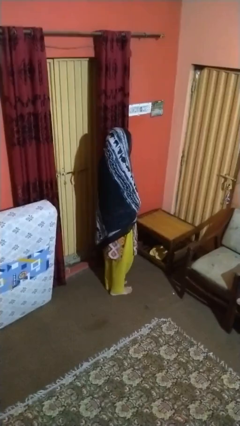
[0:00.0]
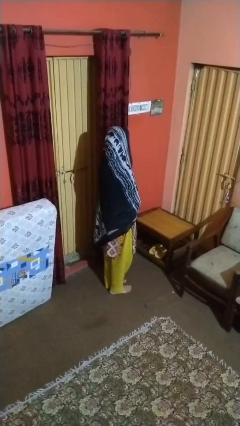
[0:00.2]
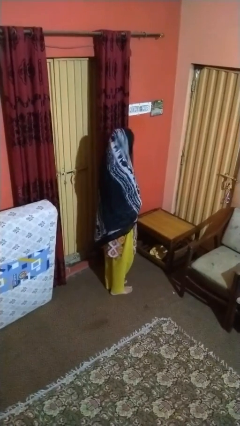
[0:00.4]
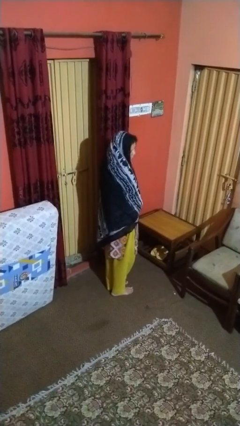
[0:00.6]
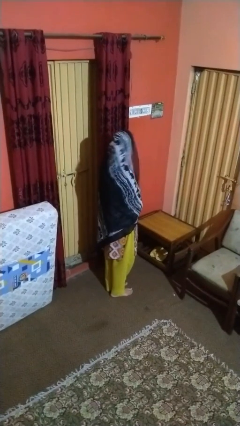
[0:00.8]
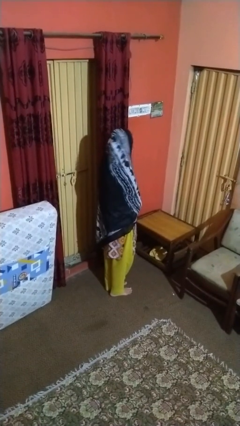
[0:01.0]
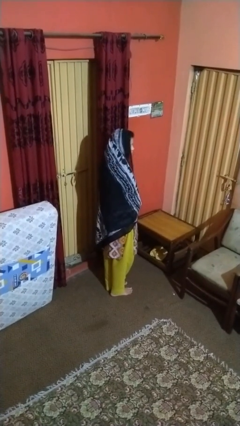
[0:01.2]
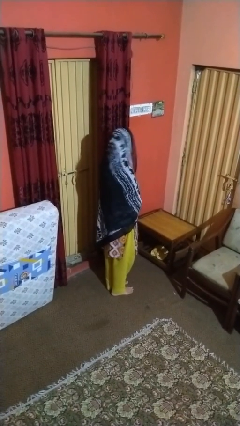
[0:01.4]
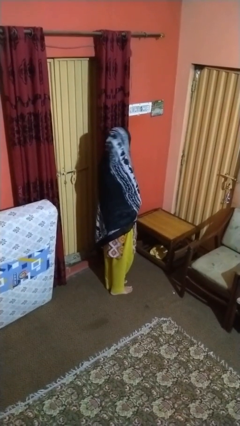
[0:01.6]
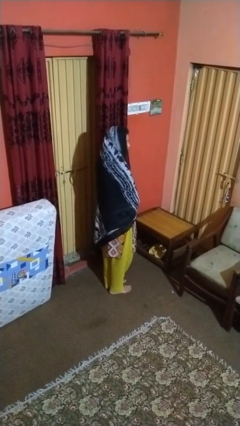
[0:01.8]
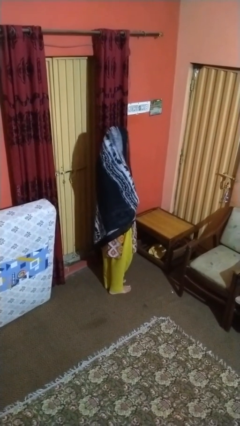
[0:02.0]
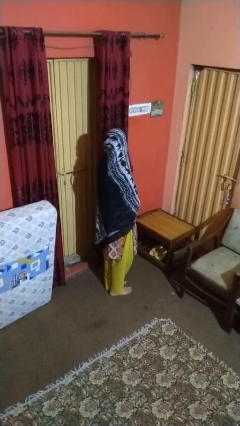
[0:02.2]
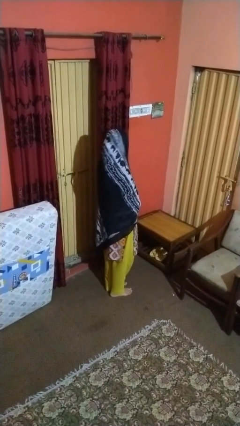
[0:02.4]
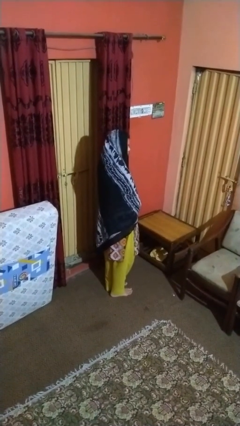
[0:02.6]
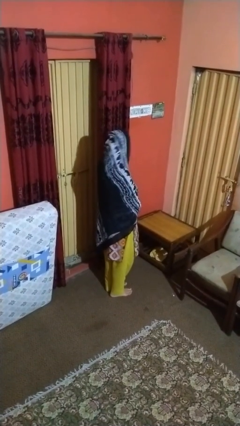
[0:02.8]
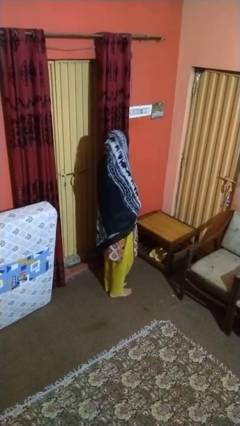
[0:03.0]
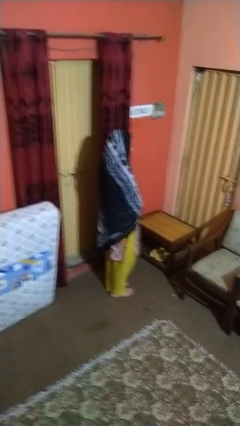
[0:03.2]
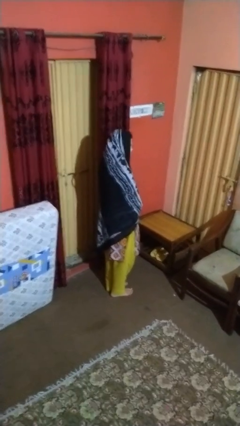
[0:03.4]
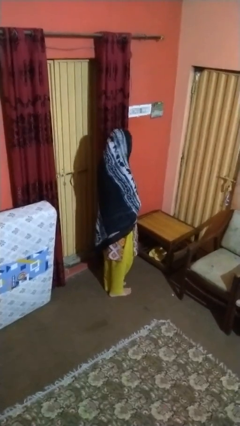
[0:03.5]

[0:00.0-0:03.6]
person shakes head

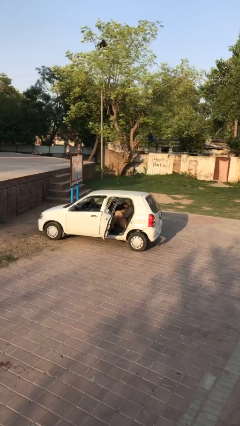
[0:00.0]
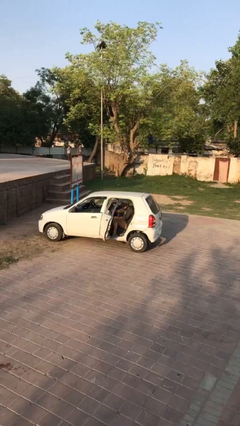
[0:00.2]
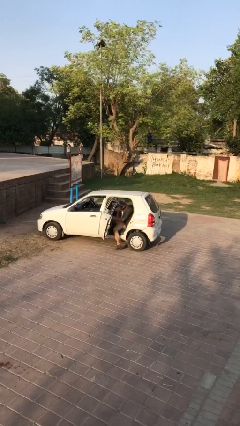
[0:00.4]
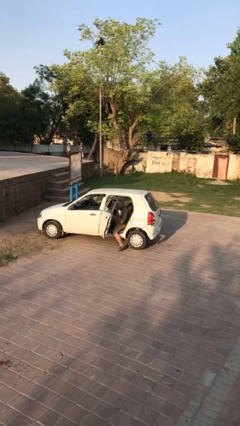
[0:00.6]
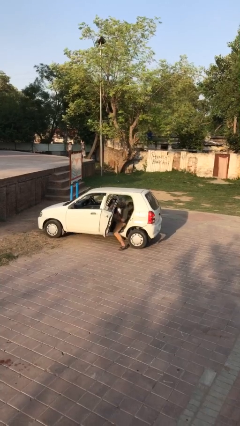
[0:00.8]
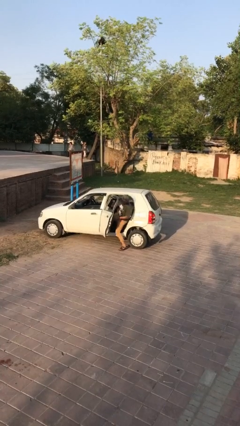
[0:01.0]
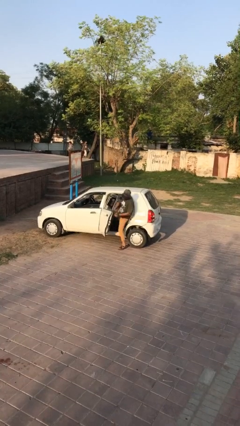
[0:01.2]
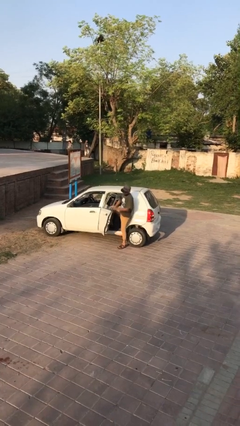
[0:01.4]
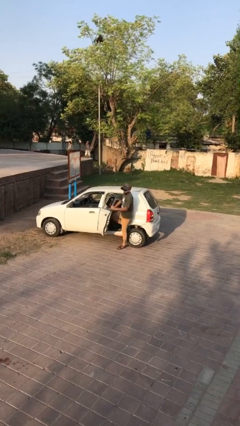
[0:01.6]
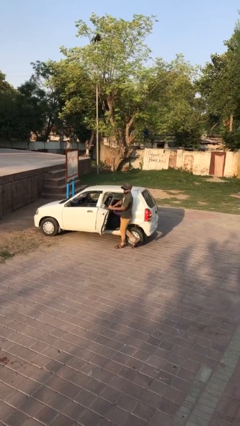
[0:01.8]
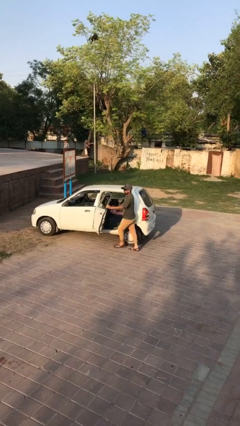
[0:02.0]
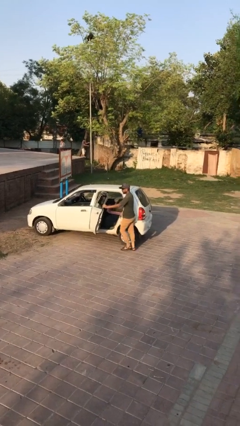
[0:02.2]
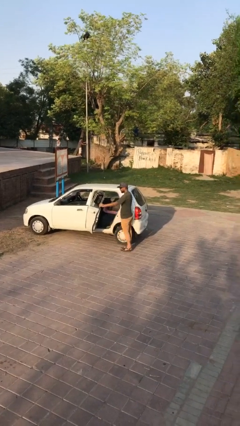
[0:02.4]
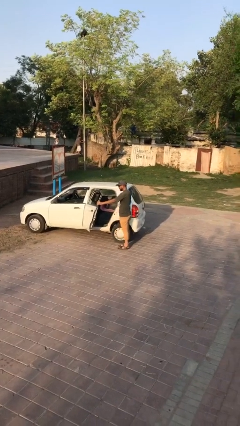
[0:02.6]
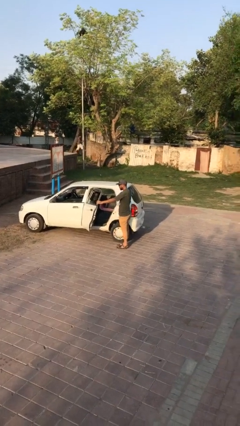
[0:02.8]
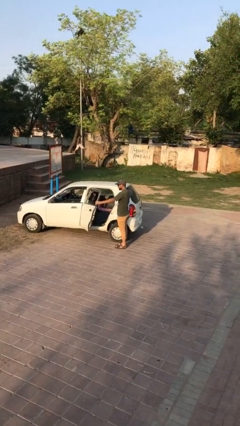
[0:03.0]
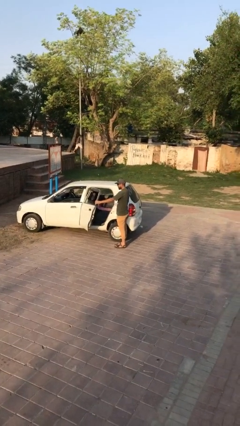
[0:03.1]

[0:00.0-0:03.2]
person exits car

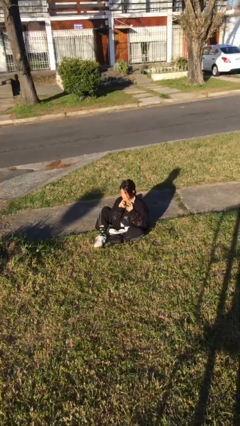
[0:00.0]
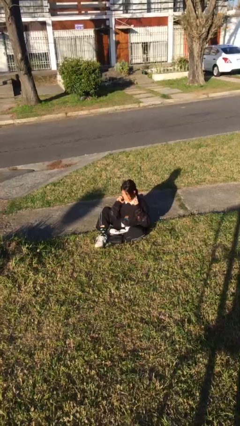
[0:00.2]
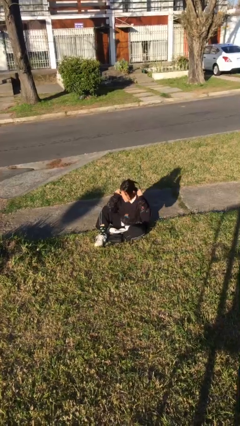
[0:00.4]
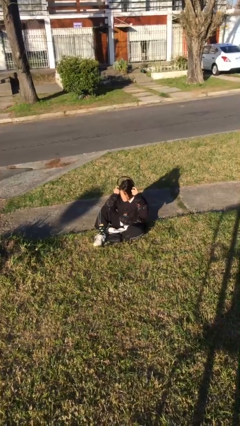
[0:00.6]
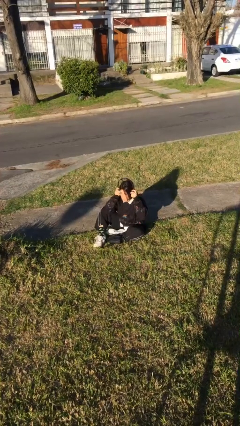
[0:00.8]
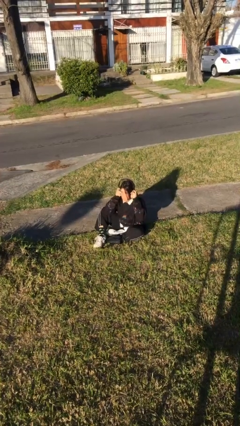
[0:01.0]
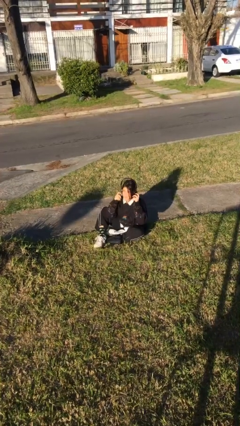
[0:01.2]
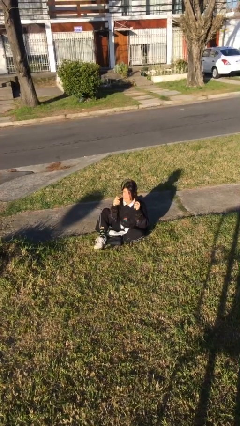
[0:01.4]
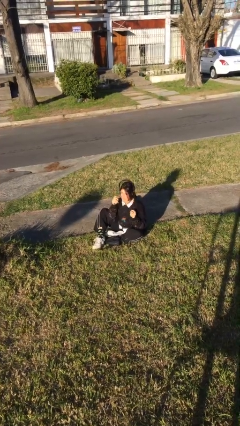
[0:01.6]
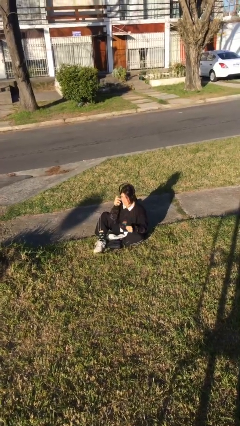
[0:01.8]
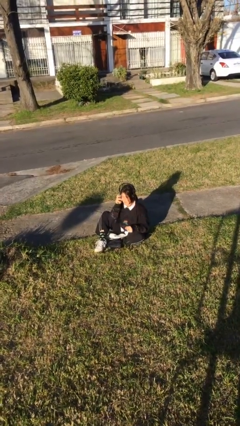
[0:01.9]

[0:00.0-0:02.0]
person puts on headphones

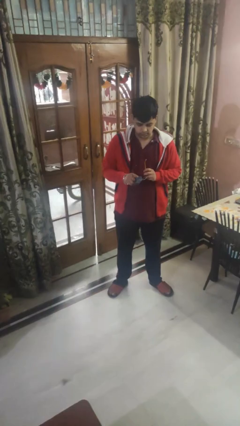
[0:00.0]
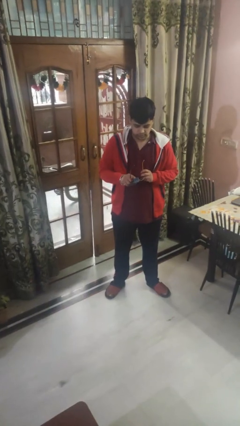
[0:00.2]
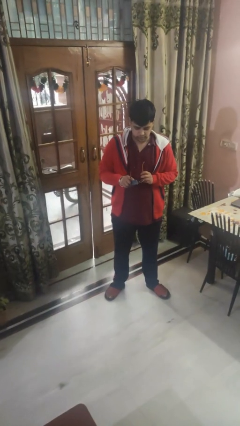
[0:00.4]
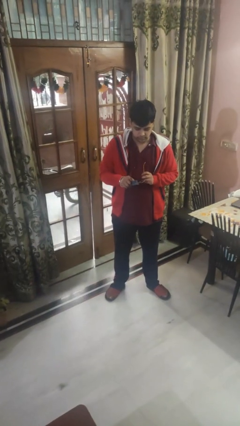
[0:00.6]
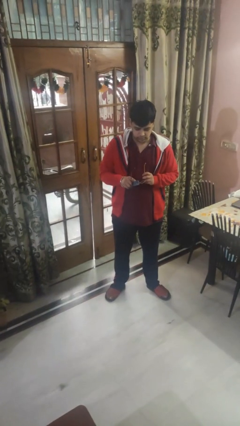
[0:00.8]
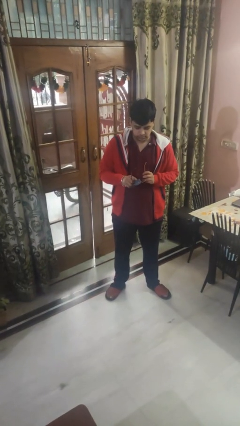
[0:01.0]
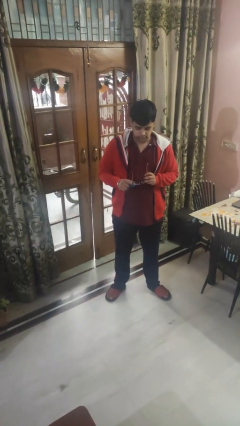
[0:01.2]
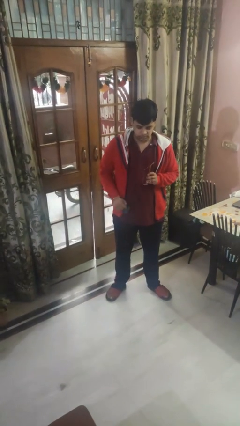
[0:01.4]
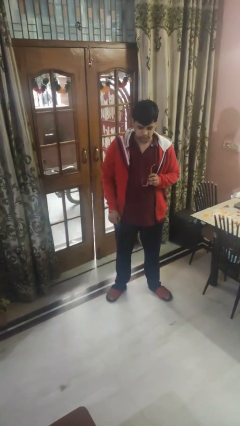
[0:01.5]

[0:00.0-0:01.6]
person cleans eyeglasses

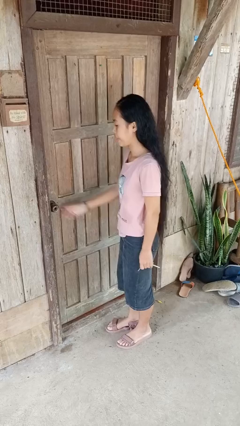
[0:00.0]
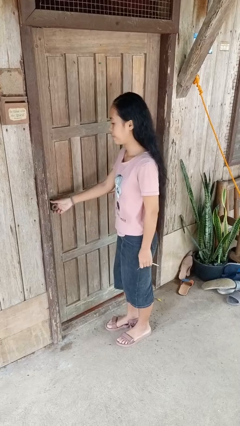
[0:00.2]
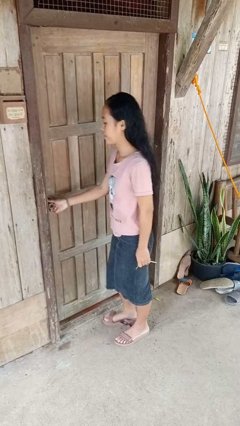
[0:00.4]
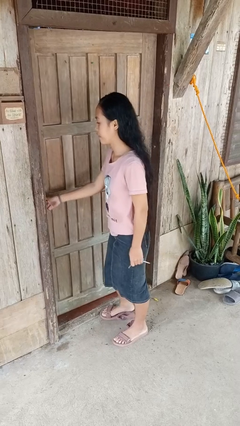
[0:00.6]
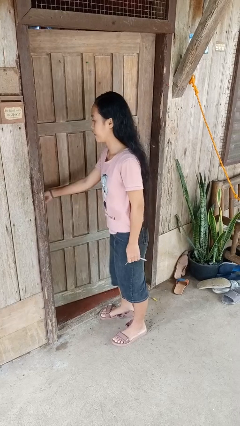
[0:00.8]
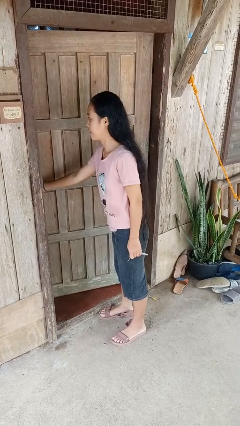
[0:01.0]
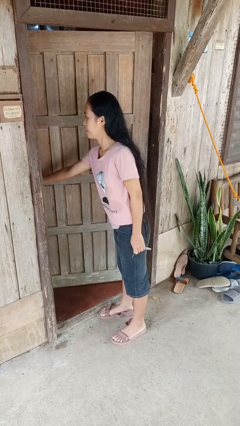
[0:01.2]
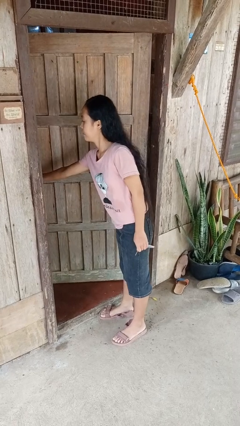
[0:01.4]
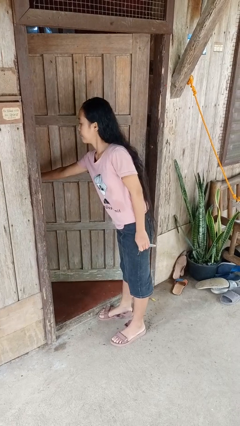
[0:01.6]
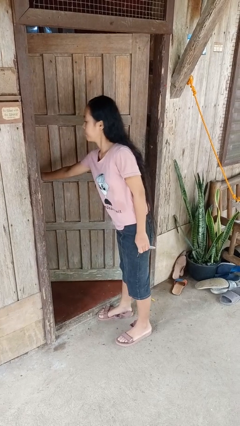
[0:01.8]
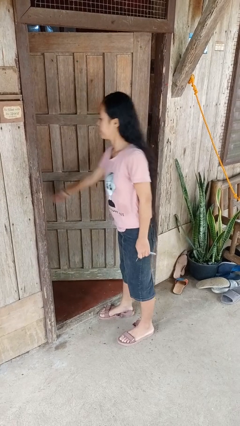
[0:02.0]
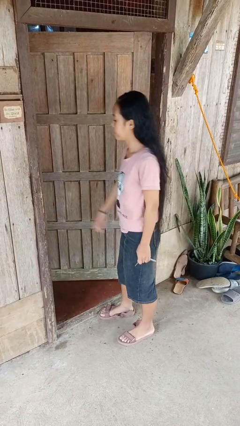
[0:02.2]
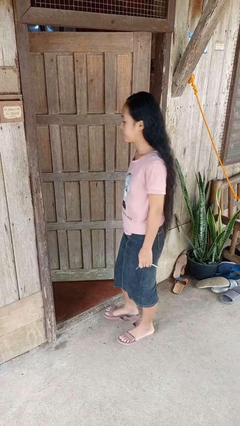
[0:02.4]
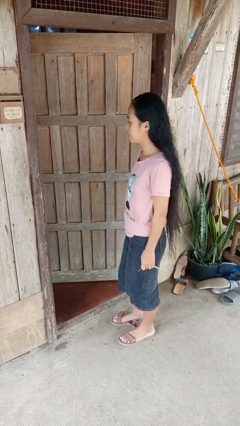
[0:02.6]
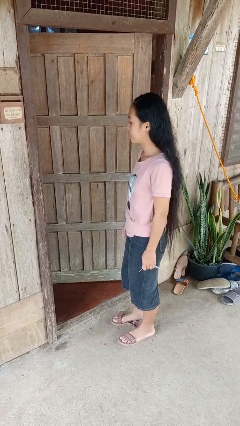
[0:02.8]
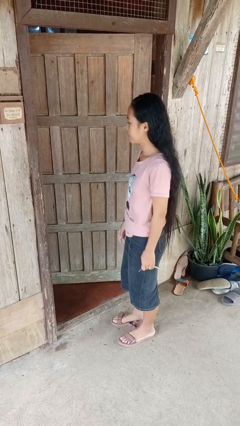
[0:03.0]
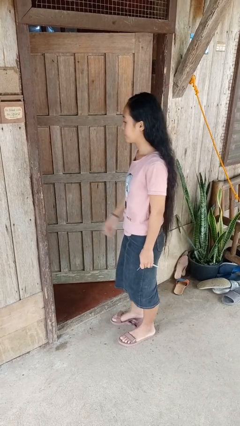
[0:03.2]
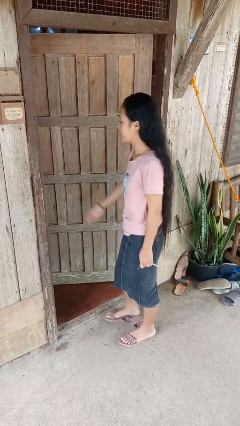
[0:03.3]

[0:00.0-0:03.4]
person opens facility door

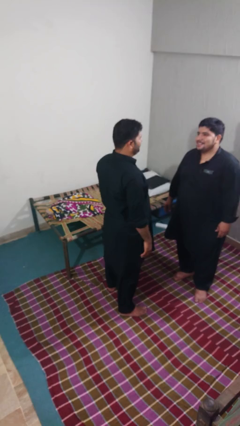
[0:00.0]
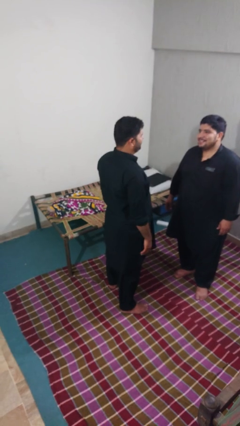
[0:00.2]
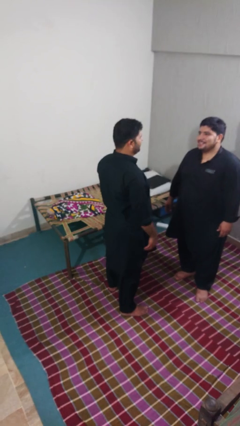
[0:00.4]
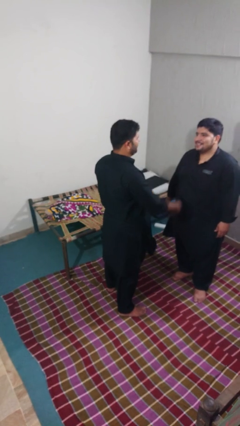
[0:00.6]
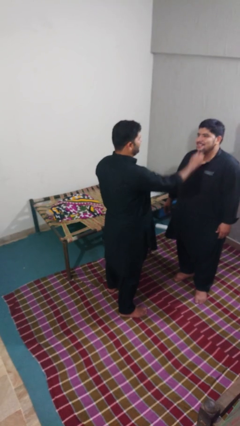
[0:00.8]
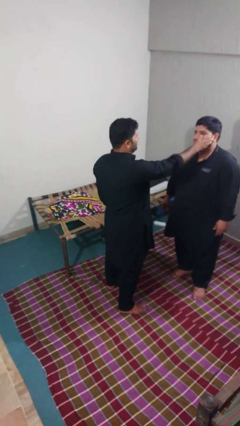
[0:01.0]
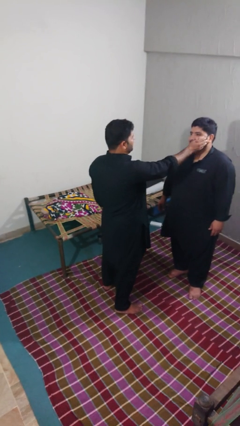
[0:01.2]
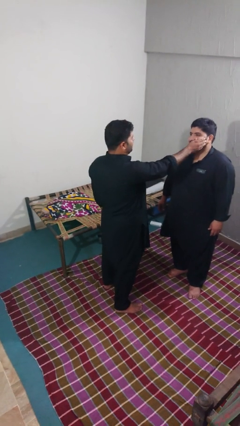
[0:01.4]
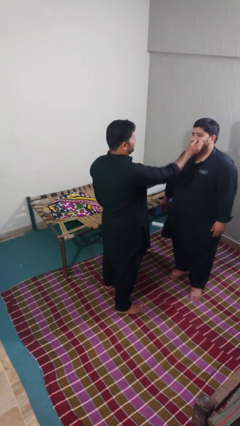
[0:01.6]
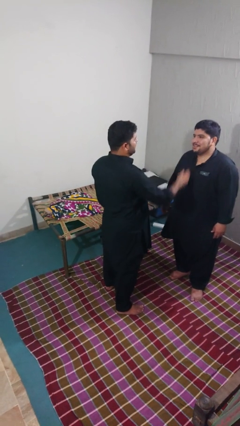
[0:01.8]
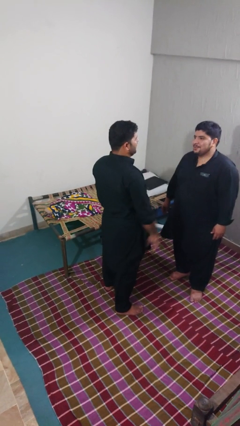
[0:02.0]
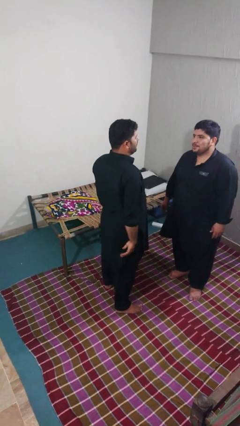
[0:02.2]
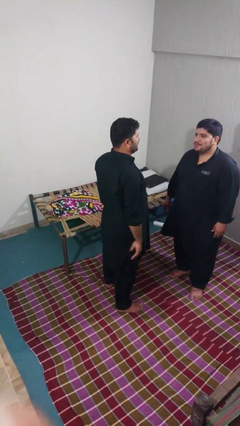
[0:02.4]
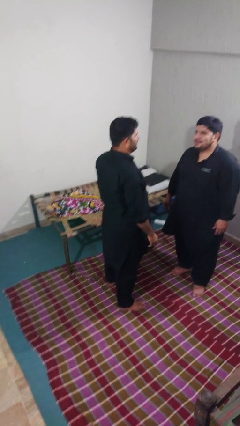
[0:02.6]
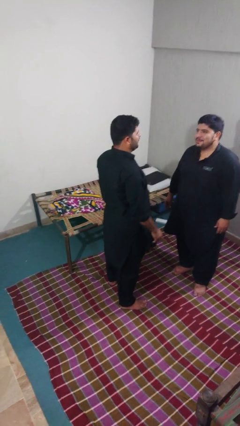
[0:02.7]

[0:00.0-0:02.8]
person touches face of person

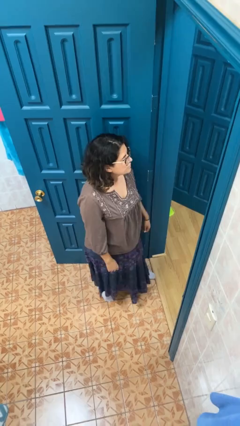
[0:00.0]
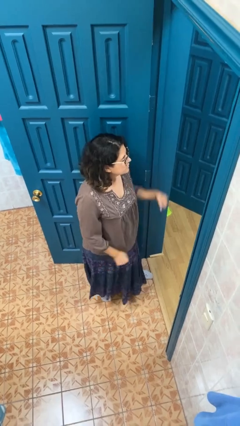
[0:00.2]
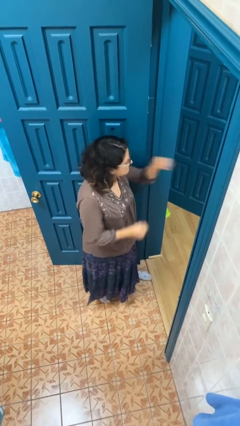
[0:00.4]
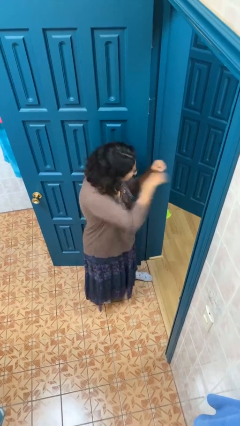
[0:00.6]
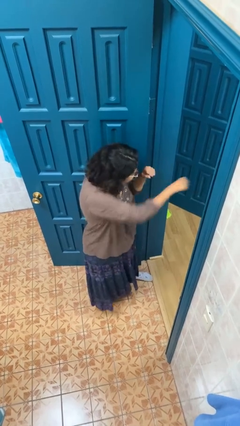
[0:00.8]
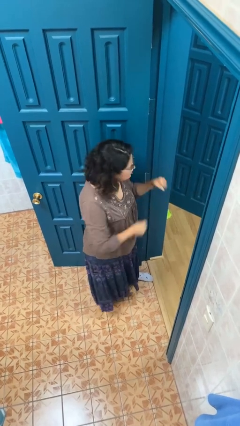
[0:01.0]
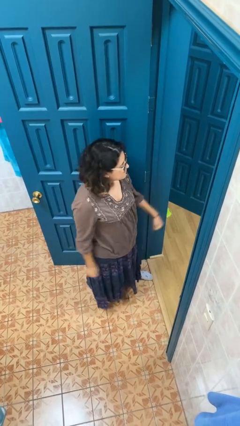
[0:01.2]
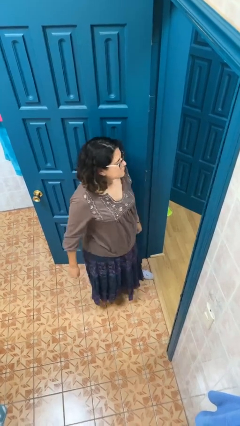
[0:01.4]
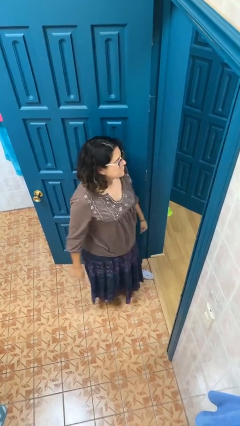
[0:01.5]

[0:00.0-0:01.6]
person punches
